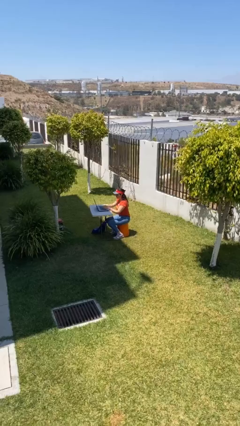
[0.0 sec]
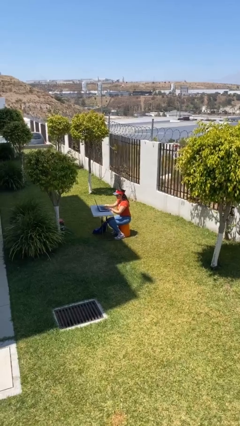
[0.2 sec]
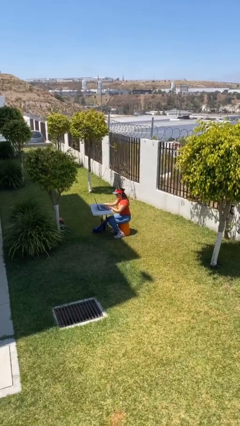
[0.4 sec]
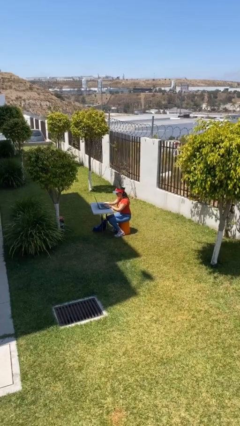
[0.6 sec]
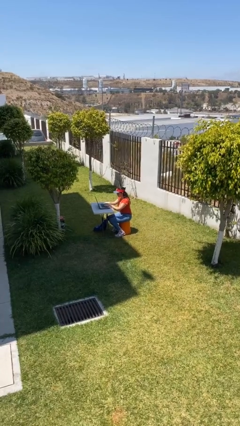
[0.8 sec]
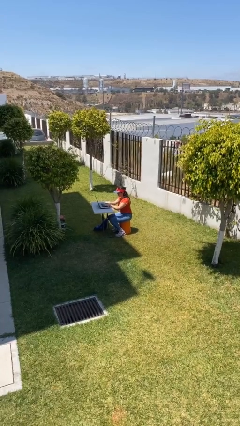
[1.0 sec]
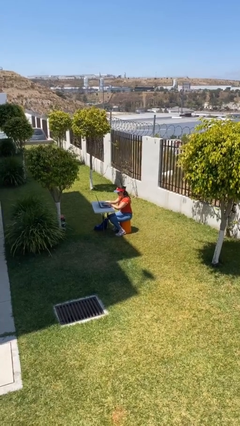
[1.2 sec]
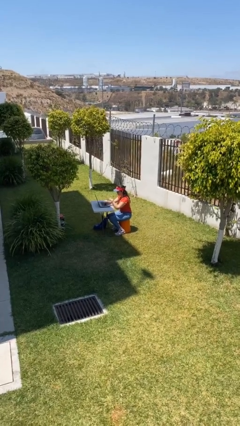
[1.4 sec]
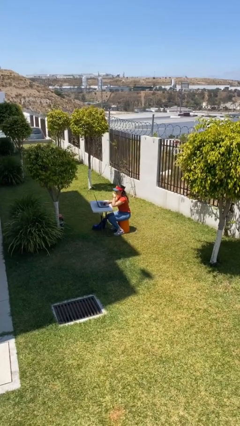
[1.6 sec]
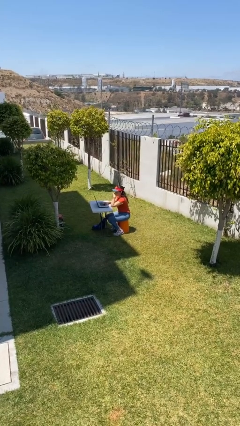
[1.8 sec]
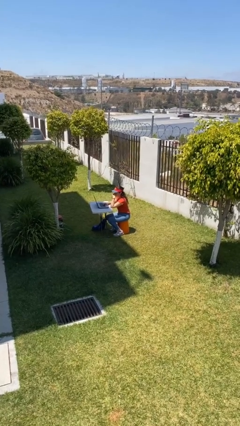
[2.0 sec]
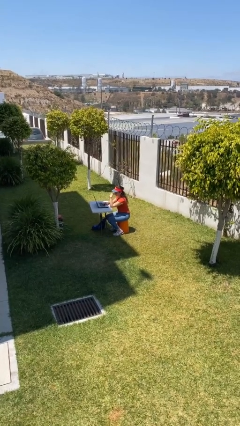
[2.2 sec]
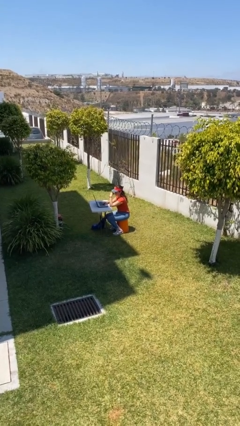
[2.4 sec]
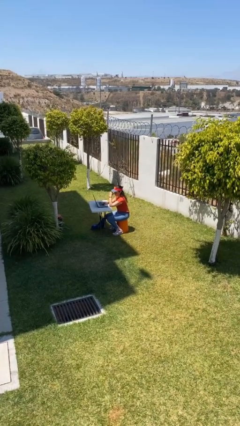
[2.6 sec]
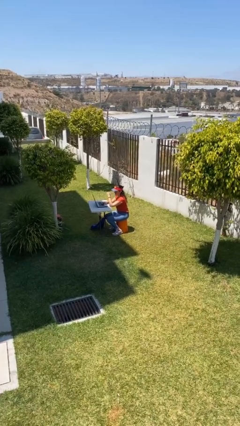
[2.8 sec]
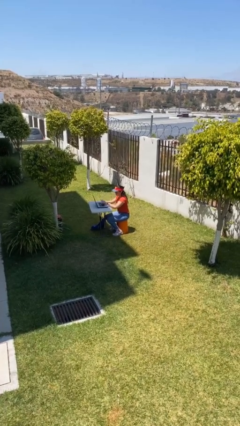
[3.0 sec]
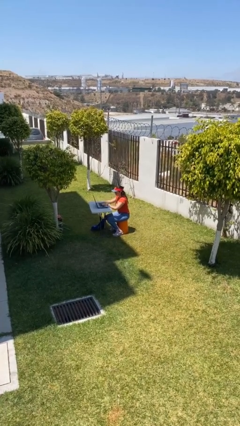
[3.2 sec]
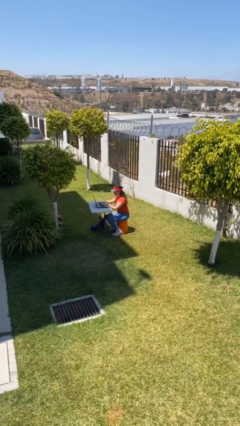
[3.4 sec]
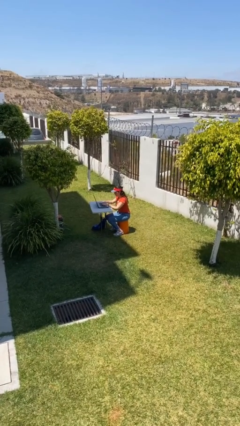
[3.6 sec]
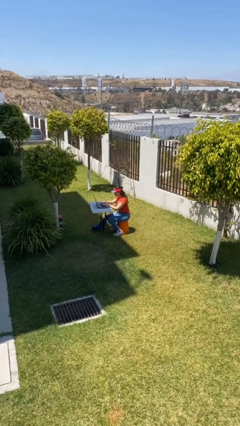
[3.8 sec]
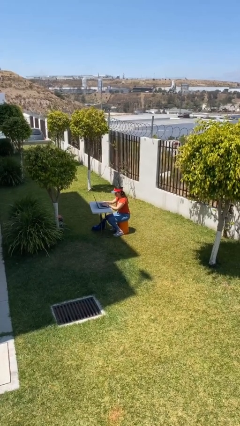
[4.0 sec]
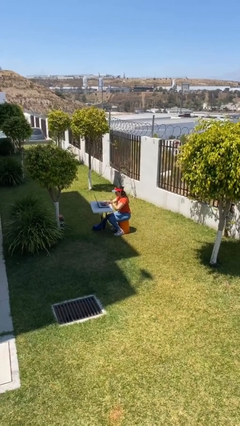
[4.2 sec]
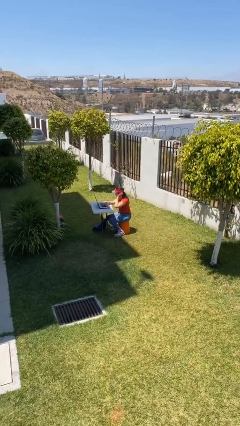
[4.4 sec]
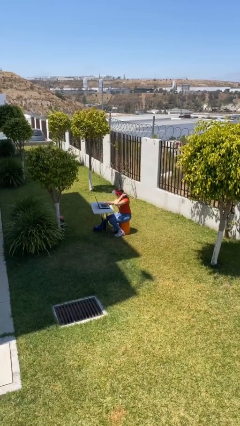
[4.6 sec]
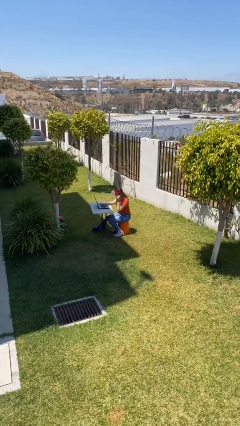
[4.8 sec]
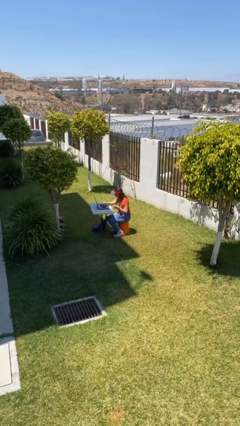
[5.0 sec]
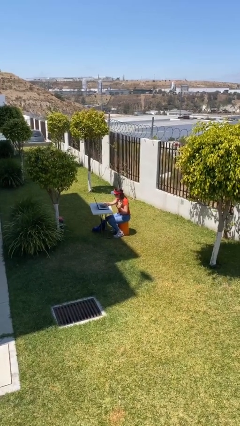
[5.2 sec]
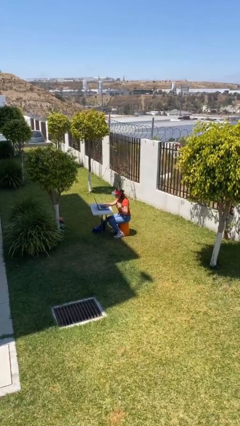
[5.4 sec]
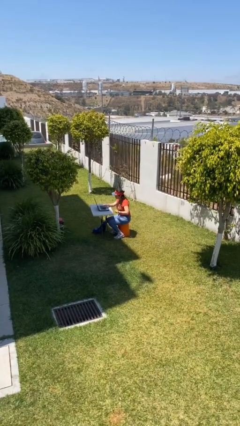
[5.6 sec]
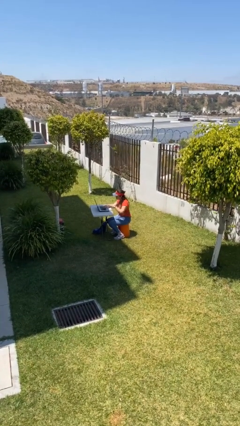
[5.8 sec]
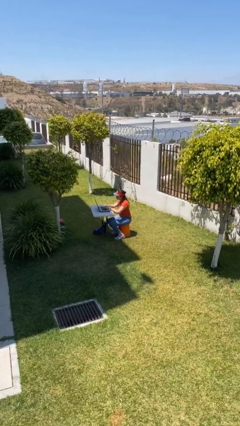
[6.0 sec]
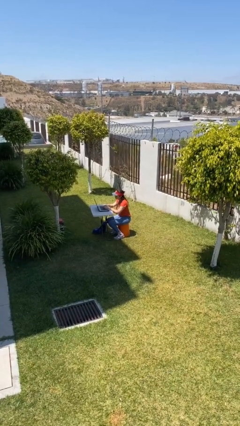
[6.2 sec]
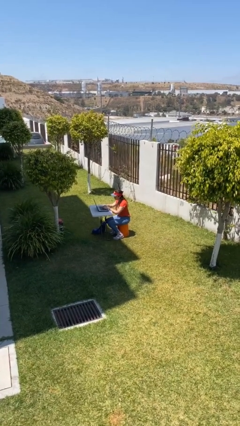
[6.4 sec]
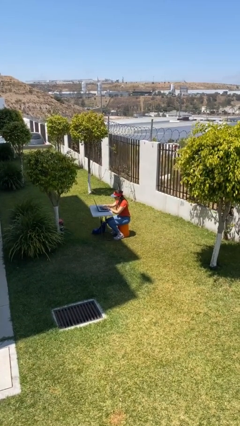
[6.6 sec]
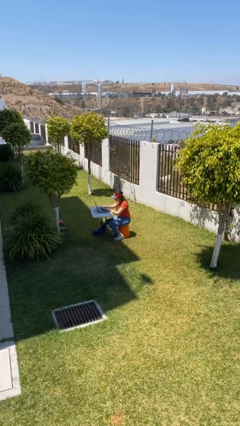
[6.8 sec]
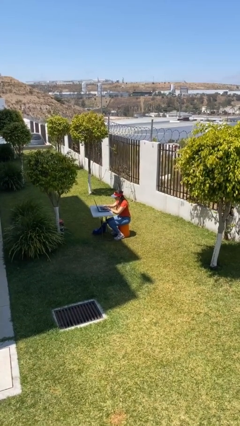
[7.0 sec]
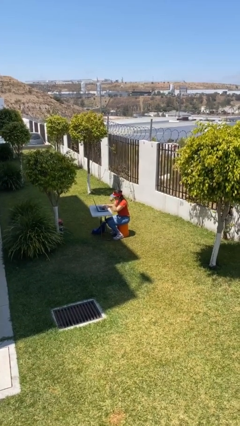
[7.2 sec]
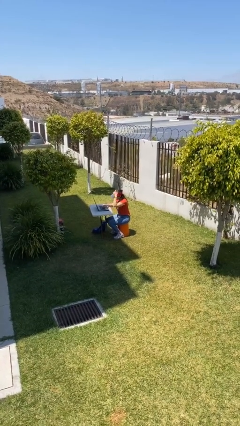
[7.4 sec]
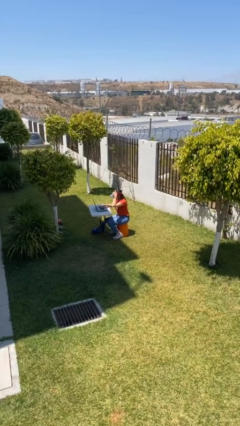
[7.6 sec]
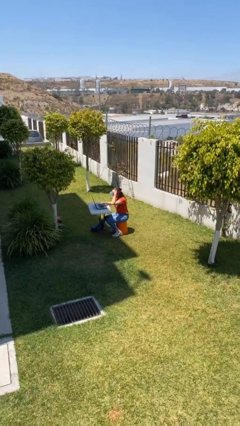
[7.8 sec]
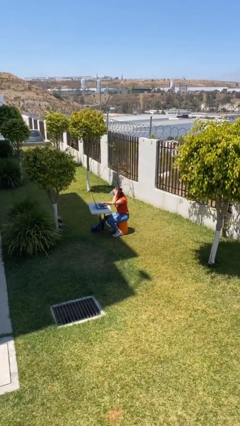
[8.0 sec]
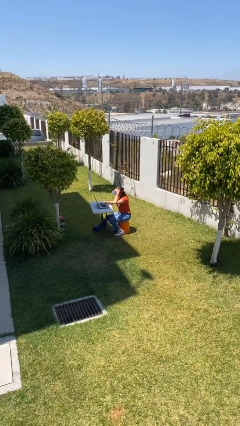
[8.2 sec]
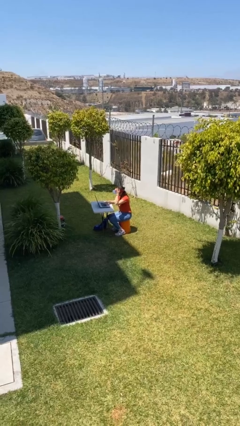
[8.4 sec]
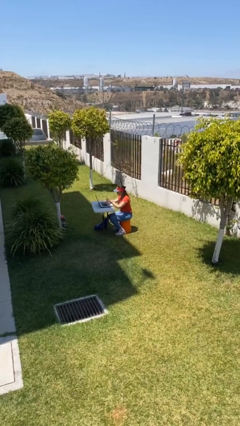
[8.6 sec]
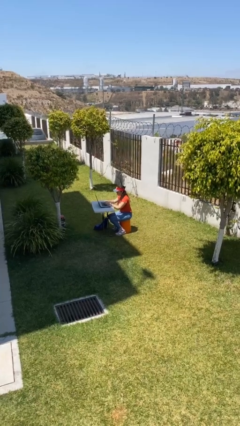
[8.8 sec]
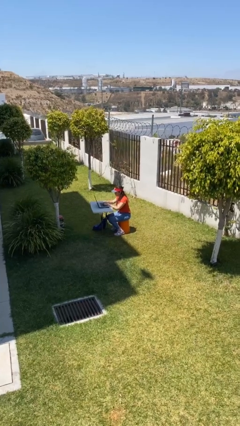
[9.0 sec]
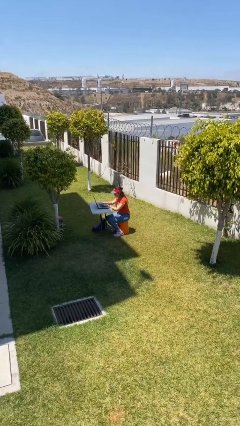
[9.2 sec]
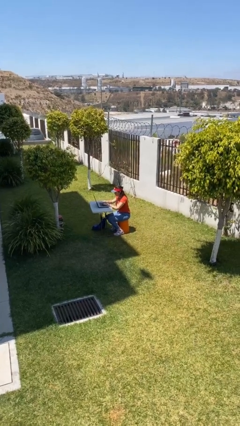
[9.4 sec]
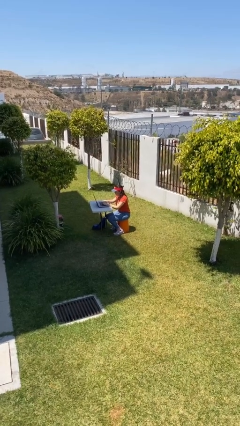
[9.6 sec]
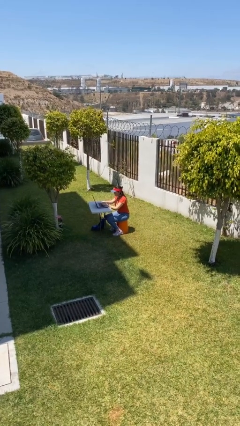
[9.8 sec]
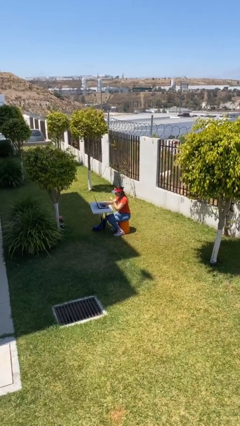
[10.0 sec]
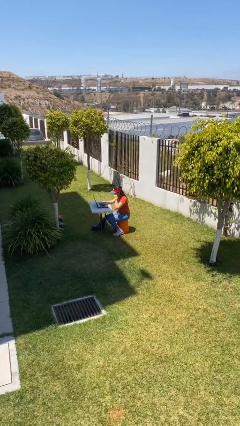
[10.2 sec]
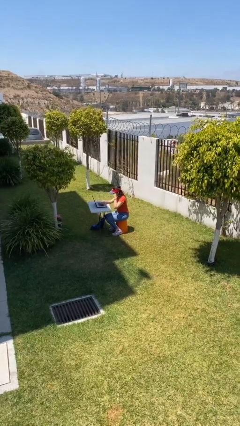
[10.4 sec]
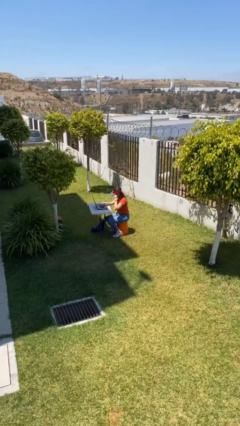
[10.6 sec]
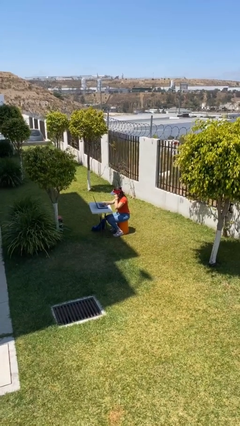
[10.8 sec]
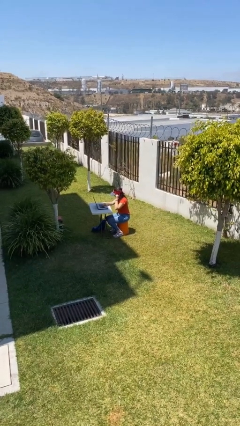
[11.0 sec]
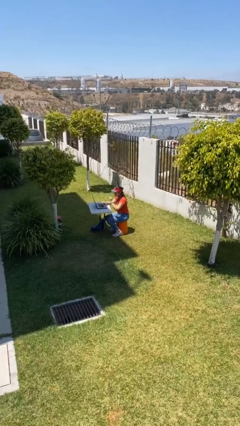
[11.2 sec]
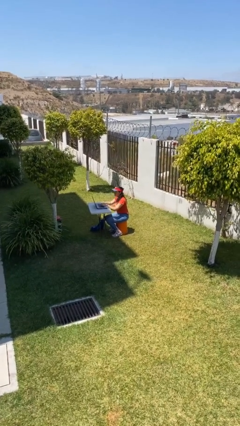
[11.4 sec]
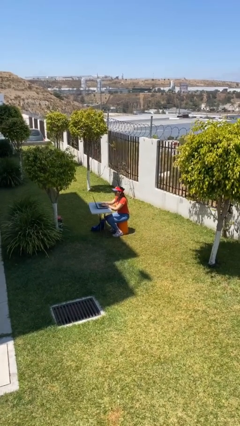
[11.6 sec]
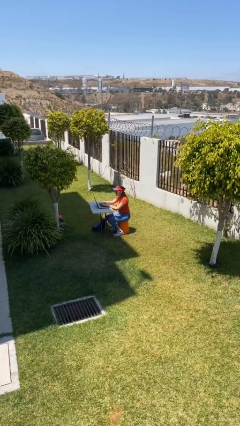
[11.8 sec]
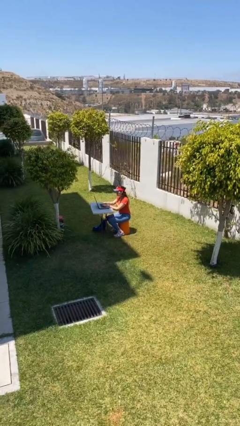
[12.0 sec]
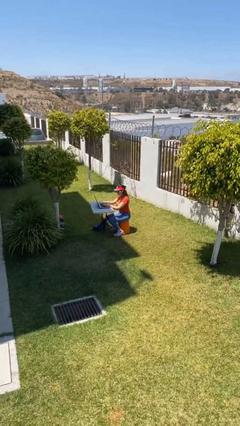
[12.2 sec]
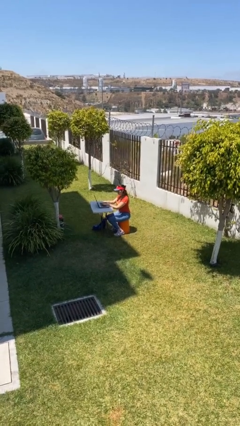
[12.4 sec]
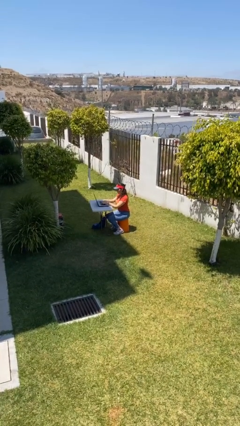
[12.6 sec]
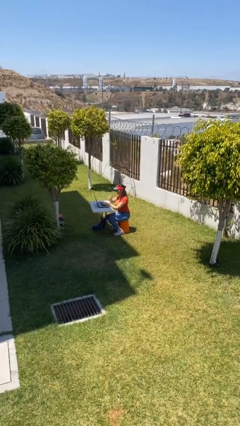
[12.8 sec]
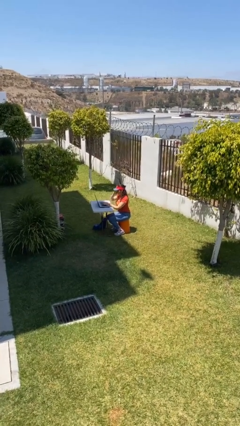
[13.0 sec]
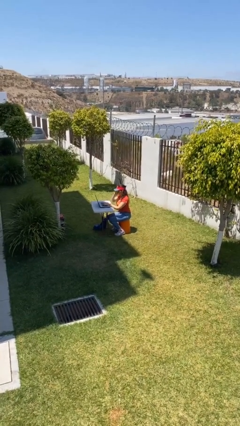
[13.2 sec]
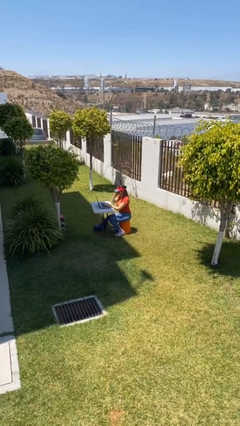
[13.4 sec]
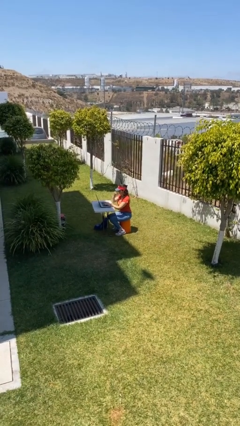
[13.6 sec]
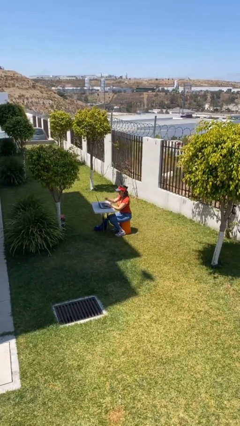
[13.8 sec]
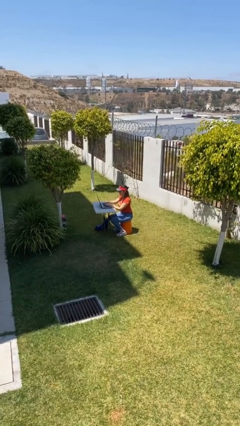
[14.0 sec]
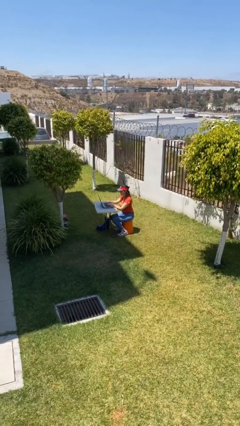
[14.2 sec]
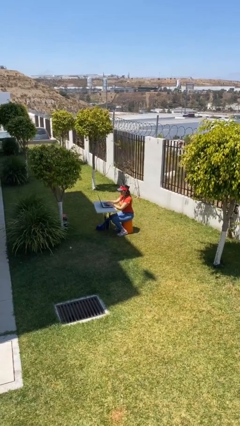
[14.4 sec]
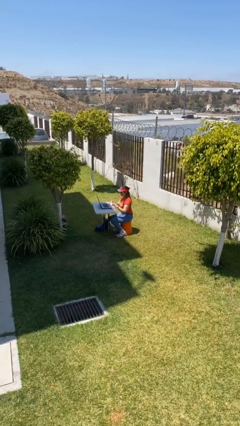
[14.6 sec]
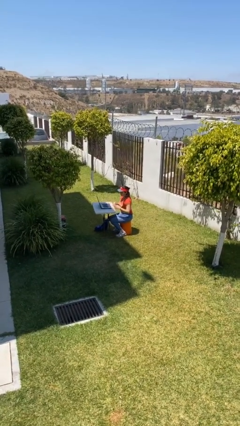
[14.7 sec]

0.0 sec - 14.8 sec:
person interacts with laptop

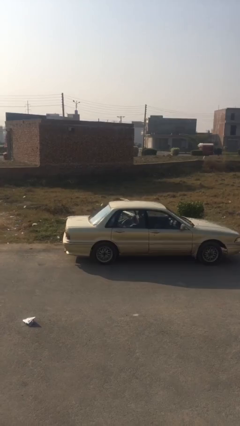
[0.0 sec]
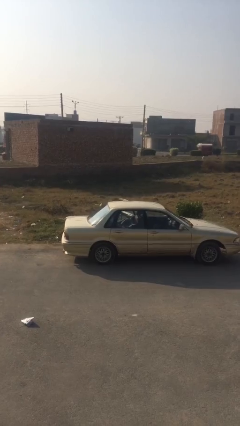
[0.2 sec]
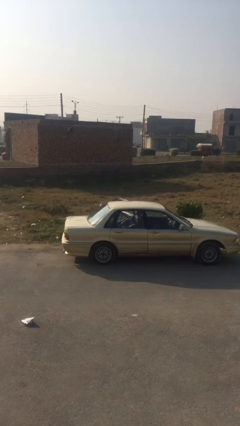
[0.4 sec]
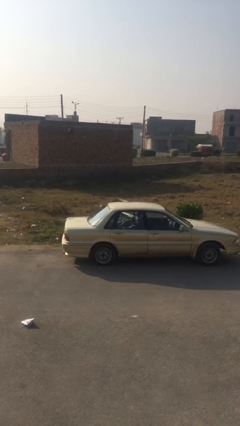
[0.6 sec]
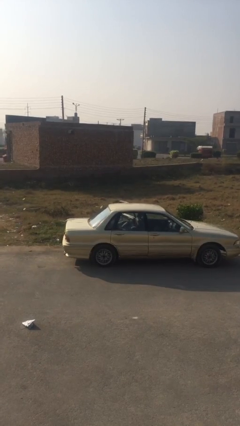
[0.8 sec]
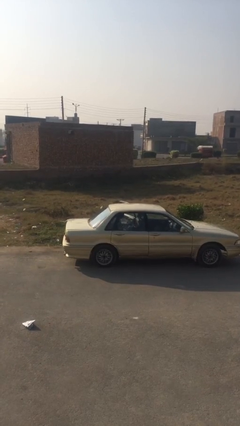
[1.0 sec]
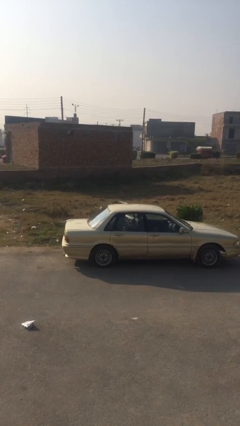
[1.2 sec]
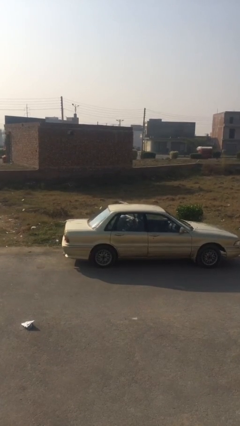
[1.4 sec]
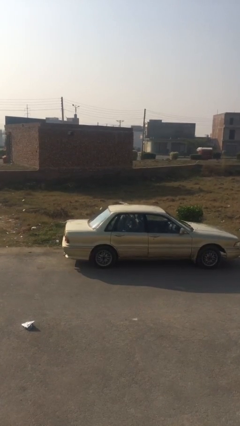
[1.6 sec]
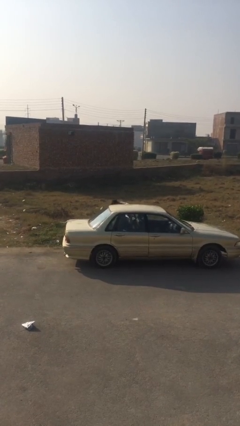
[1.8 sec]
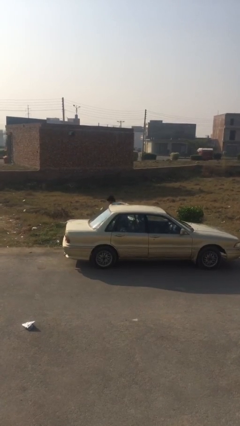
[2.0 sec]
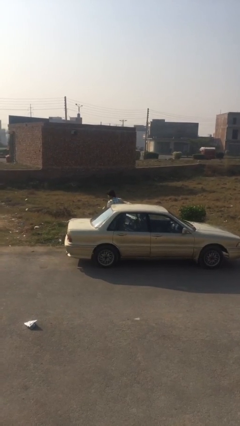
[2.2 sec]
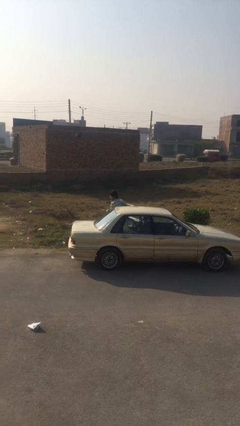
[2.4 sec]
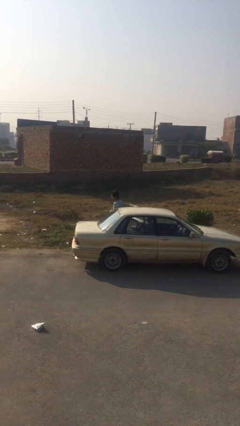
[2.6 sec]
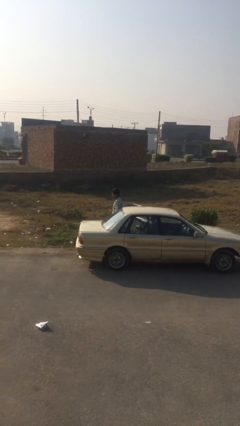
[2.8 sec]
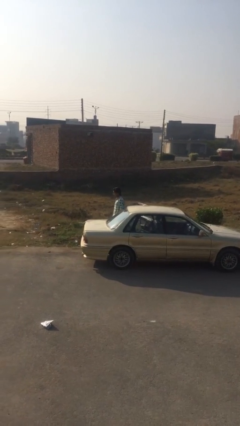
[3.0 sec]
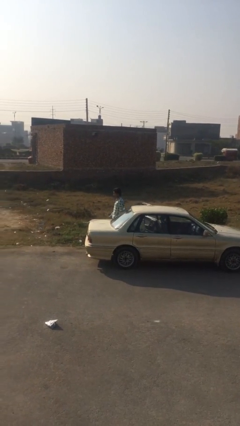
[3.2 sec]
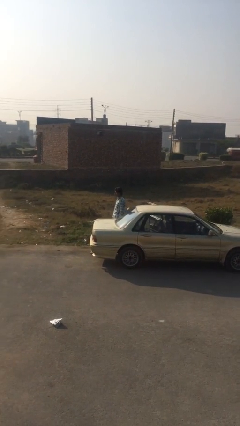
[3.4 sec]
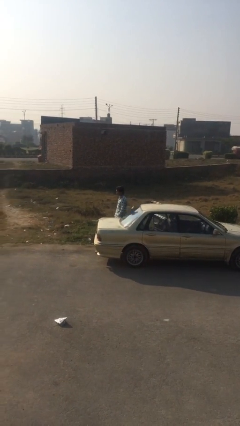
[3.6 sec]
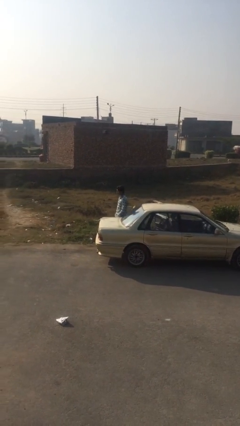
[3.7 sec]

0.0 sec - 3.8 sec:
person exits car
